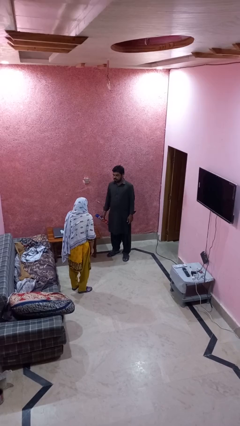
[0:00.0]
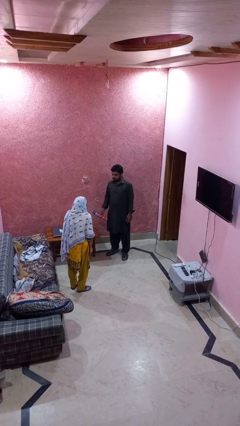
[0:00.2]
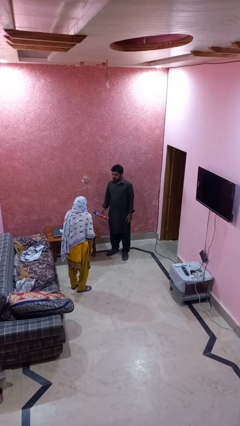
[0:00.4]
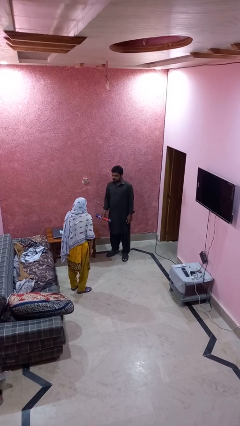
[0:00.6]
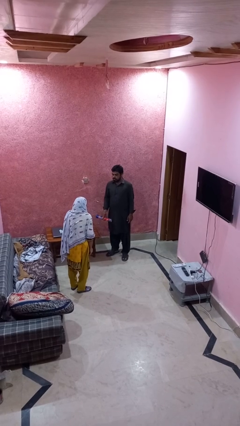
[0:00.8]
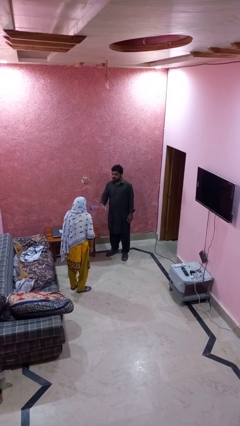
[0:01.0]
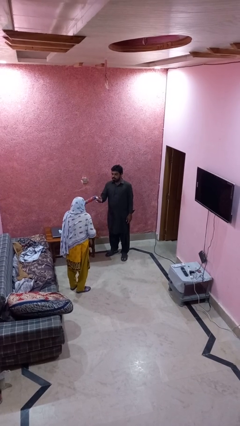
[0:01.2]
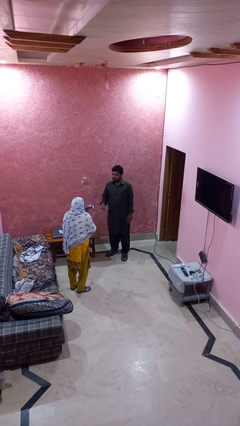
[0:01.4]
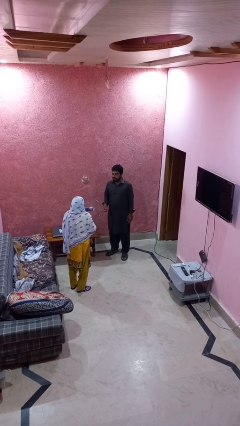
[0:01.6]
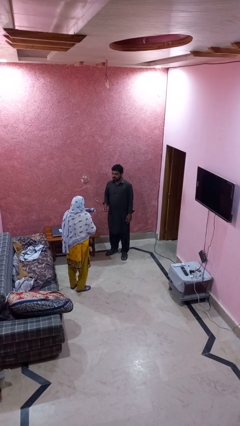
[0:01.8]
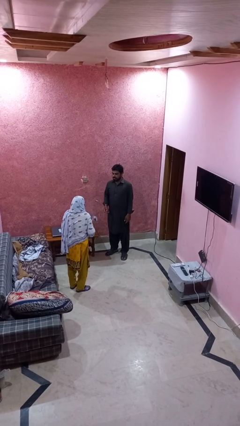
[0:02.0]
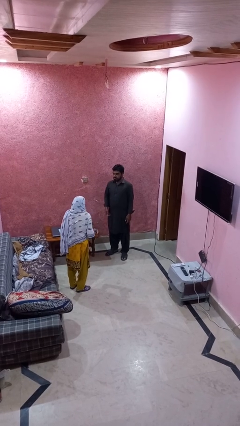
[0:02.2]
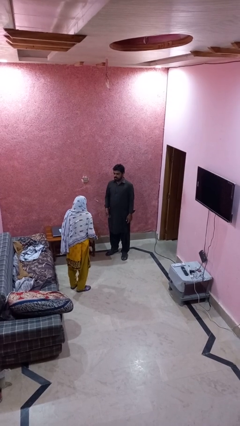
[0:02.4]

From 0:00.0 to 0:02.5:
person throws object to person

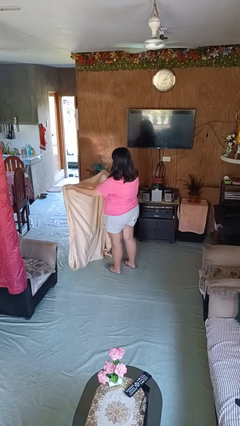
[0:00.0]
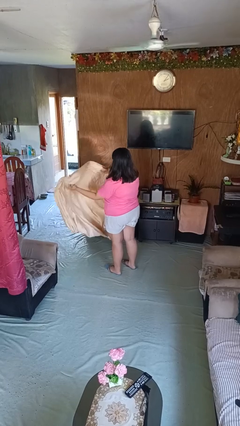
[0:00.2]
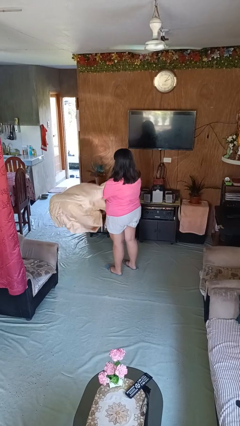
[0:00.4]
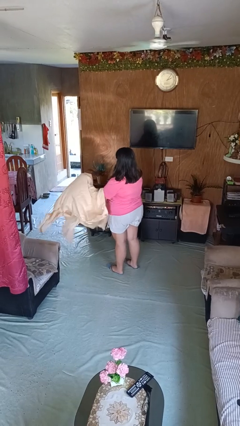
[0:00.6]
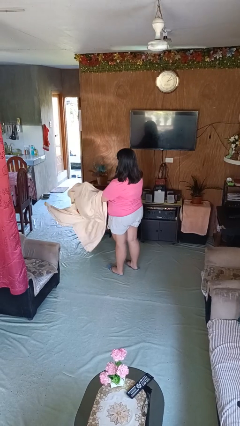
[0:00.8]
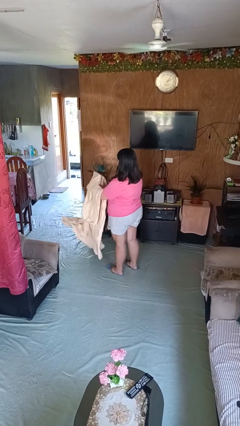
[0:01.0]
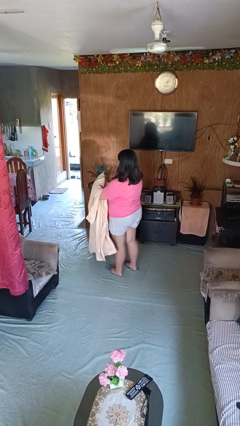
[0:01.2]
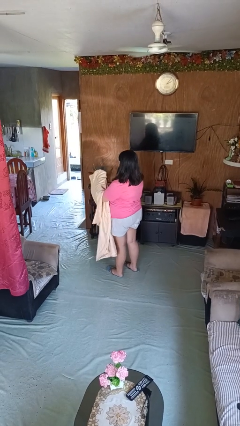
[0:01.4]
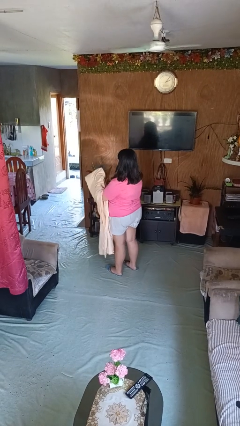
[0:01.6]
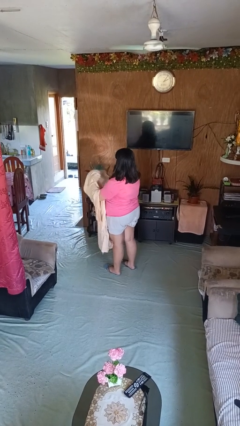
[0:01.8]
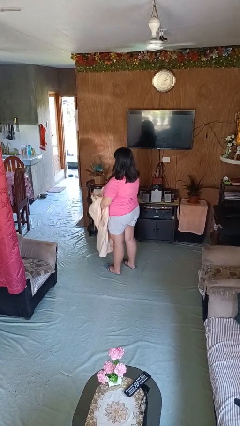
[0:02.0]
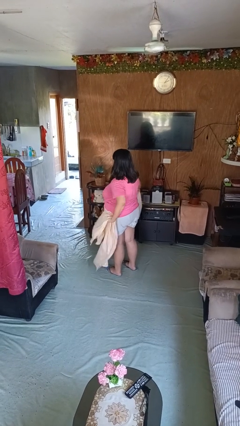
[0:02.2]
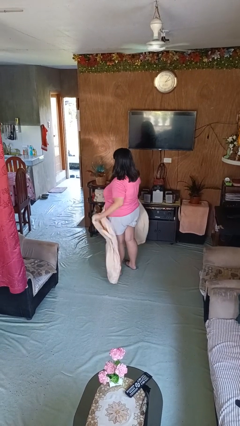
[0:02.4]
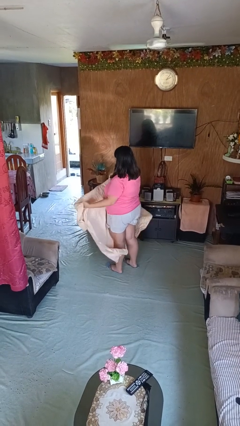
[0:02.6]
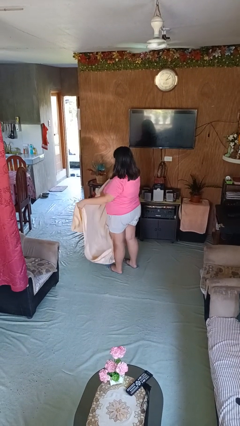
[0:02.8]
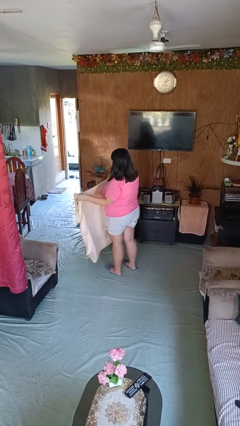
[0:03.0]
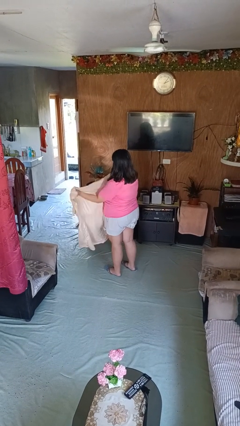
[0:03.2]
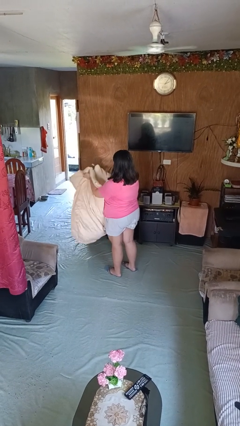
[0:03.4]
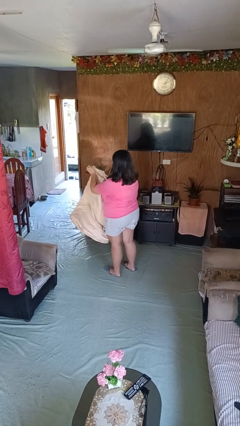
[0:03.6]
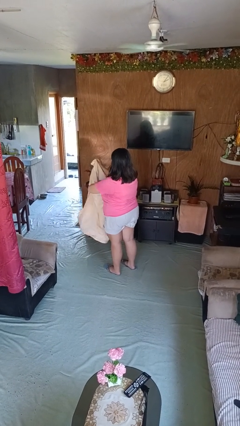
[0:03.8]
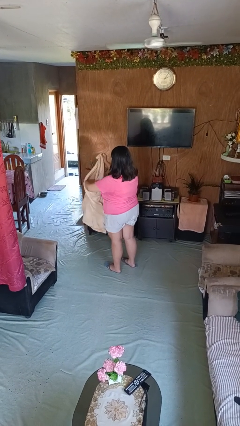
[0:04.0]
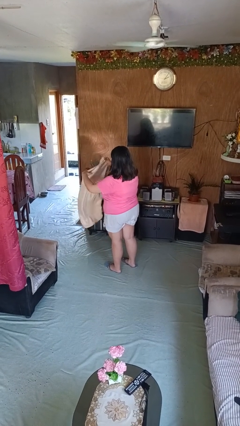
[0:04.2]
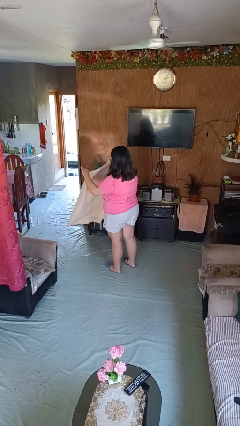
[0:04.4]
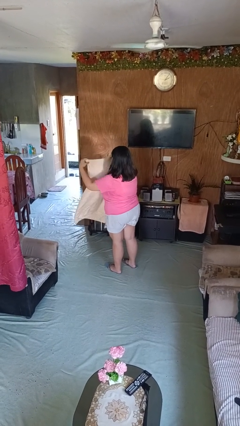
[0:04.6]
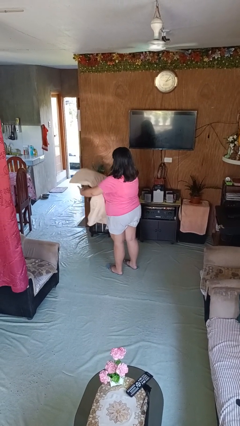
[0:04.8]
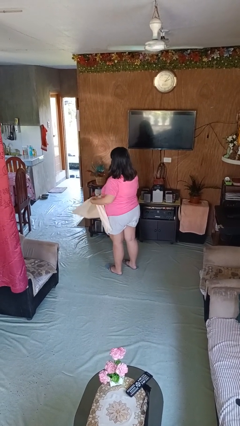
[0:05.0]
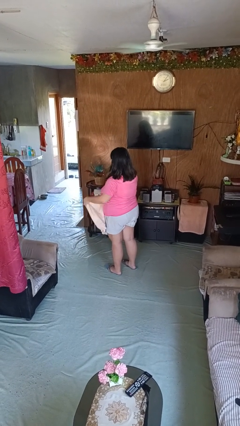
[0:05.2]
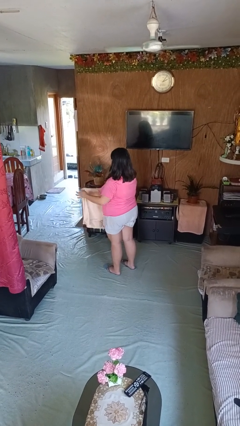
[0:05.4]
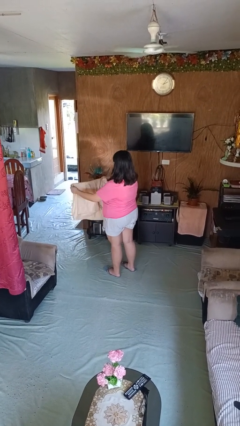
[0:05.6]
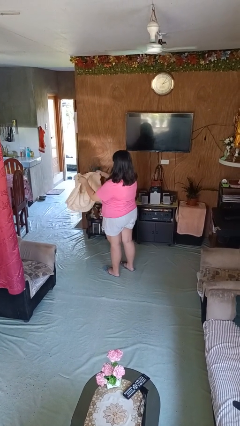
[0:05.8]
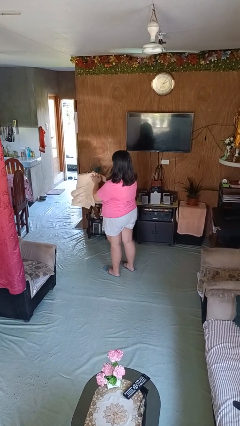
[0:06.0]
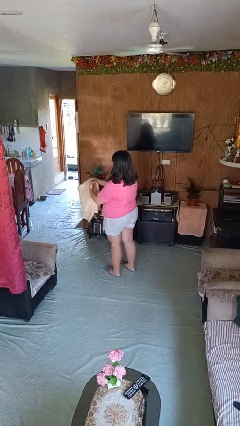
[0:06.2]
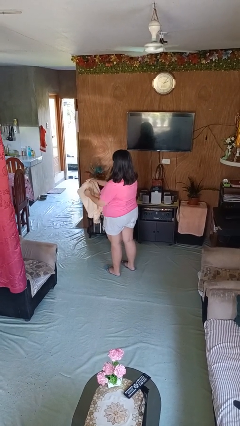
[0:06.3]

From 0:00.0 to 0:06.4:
person folds blanket

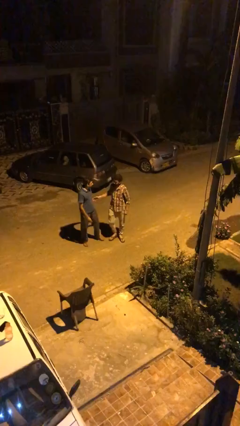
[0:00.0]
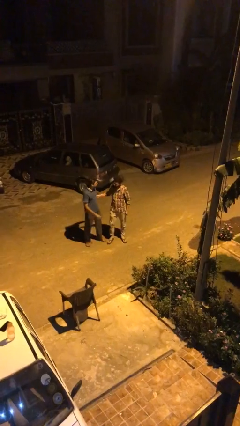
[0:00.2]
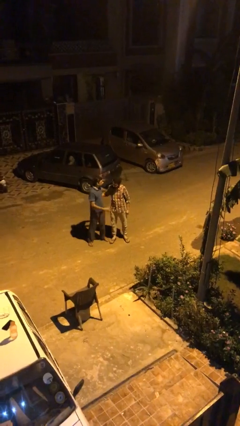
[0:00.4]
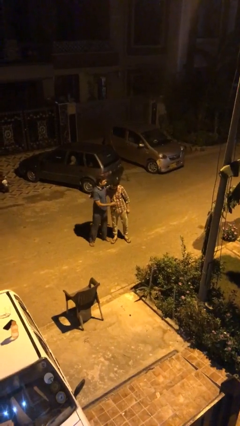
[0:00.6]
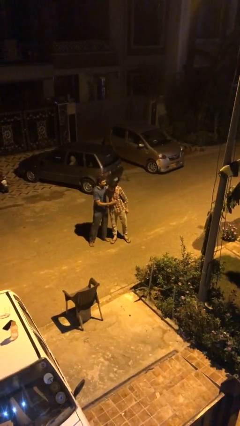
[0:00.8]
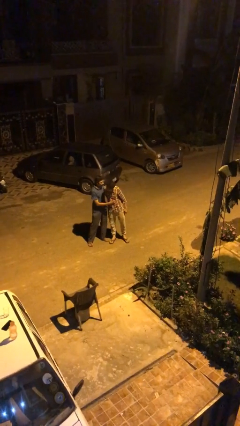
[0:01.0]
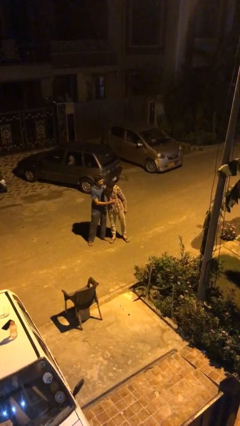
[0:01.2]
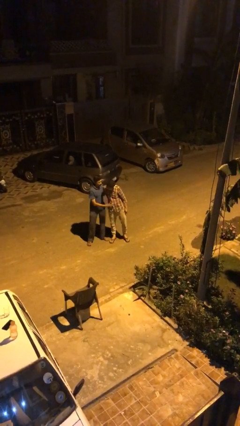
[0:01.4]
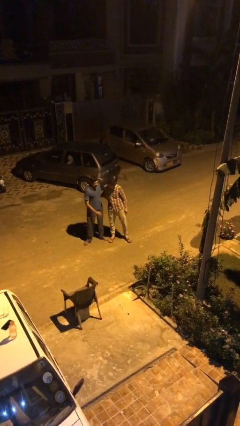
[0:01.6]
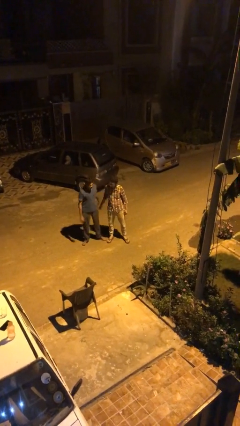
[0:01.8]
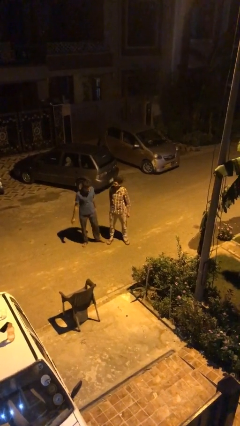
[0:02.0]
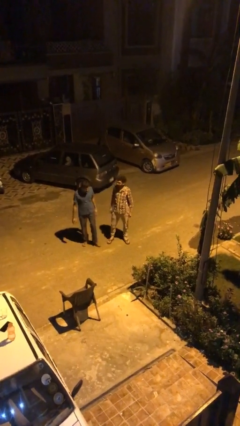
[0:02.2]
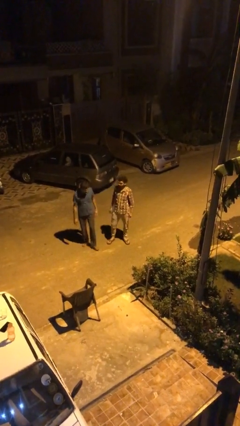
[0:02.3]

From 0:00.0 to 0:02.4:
person embraces person

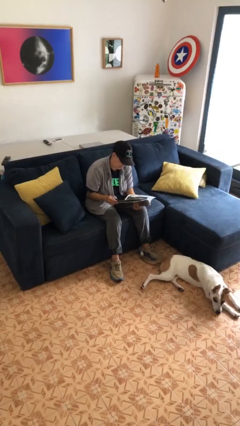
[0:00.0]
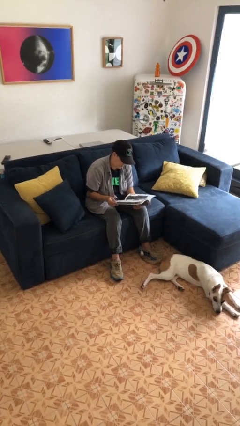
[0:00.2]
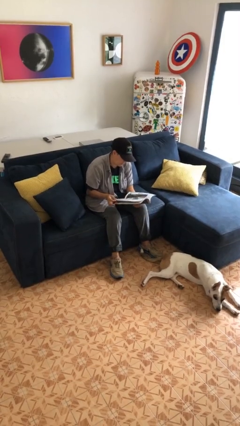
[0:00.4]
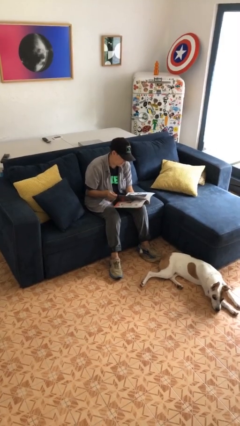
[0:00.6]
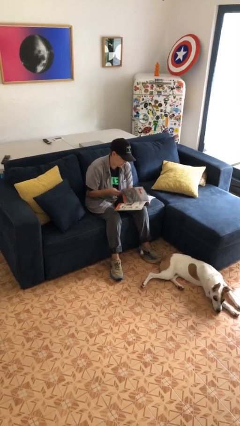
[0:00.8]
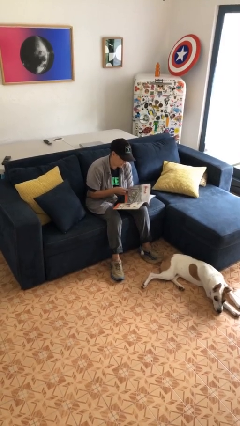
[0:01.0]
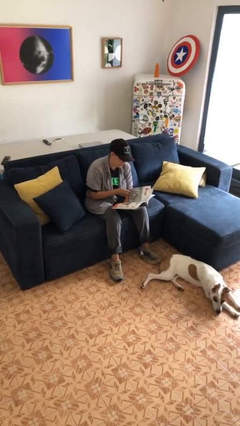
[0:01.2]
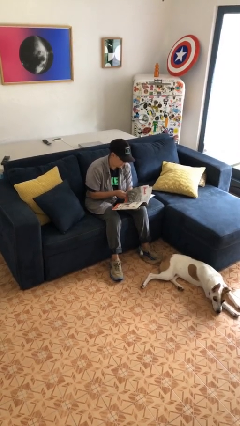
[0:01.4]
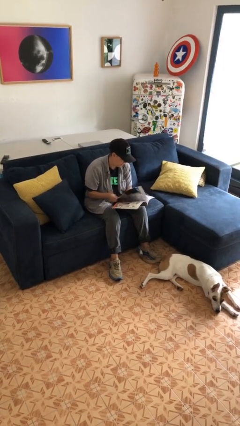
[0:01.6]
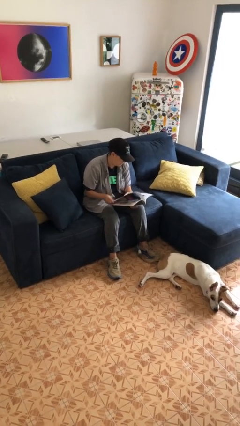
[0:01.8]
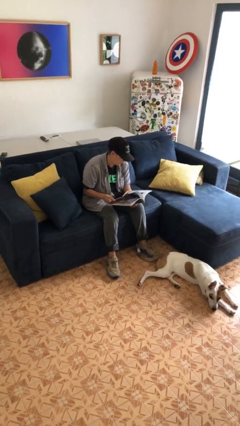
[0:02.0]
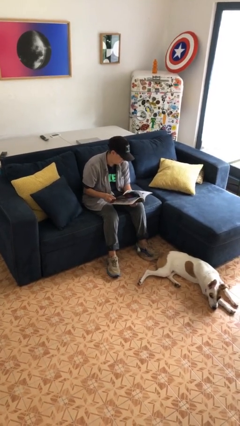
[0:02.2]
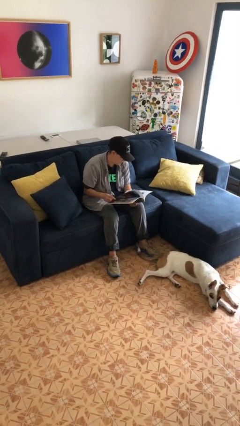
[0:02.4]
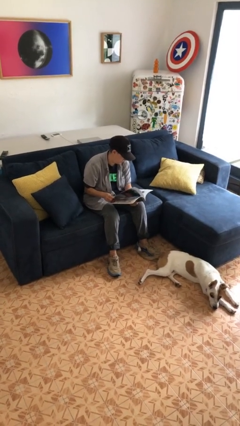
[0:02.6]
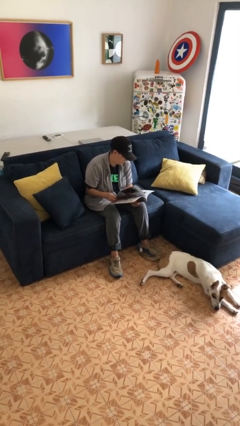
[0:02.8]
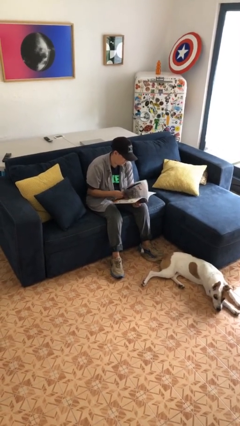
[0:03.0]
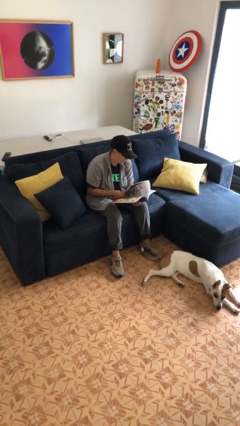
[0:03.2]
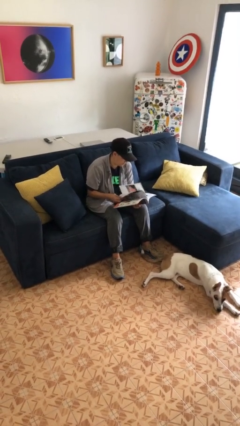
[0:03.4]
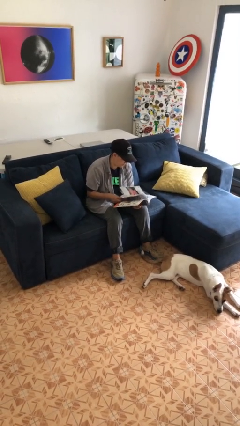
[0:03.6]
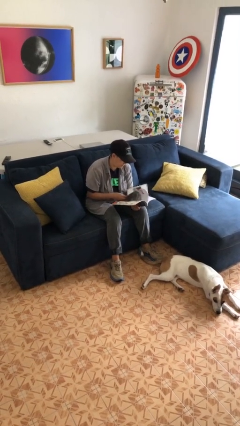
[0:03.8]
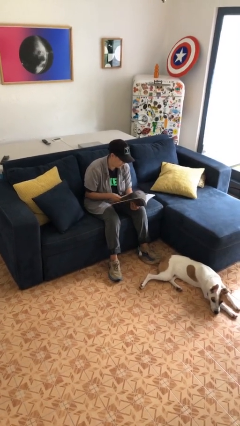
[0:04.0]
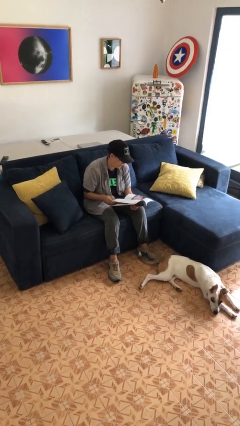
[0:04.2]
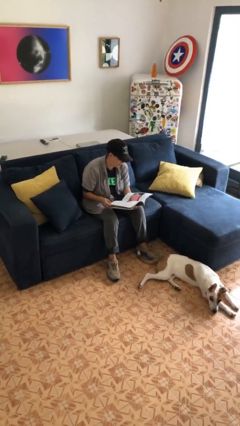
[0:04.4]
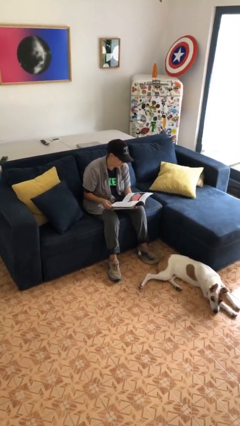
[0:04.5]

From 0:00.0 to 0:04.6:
person reads magazine

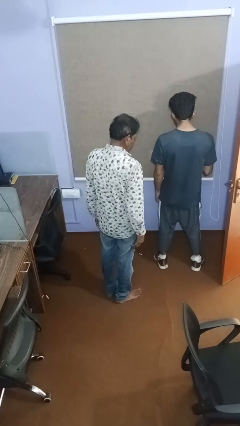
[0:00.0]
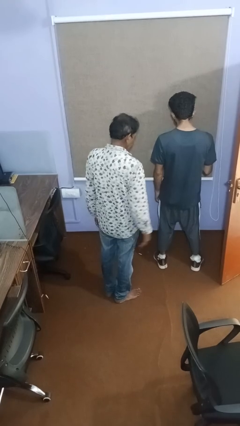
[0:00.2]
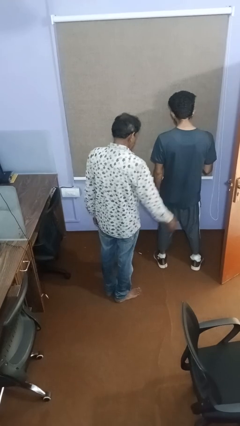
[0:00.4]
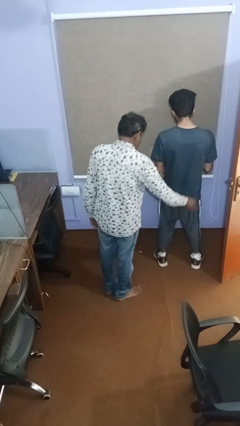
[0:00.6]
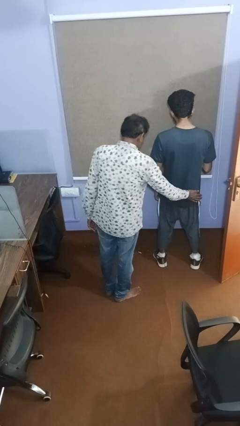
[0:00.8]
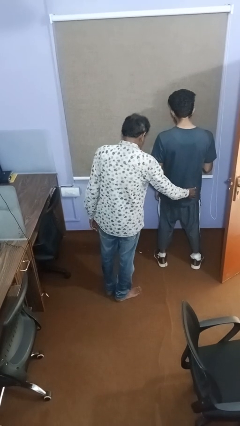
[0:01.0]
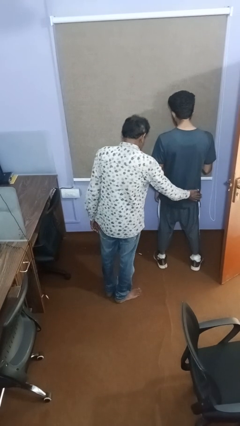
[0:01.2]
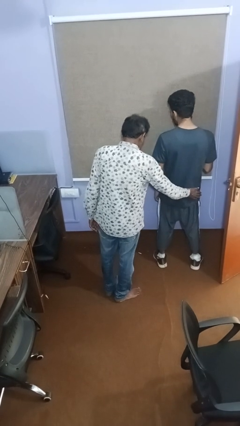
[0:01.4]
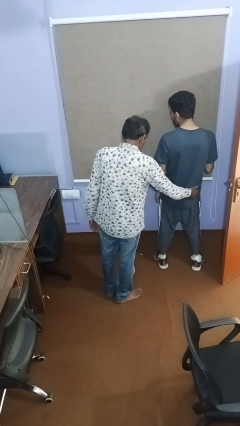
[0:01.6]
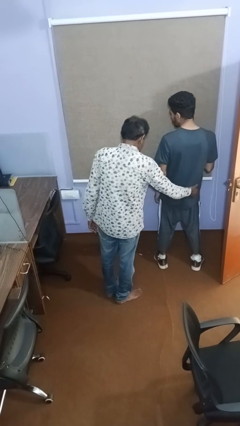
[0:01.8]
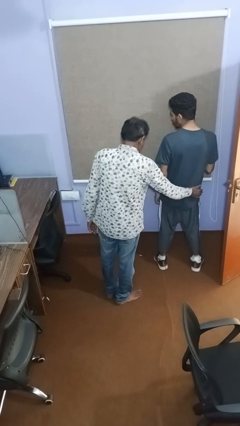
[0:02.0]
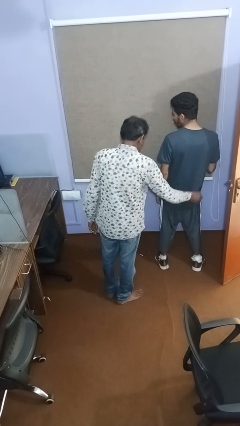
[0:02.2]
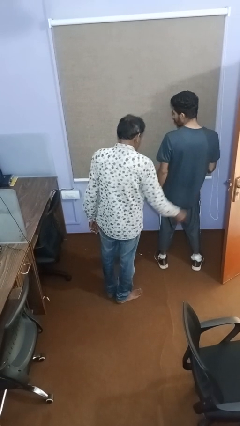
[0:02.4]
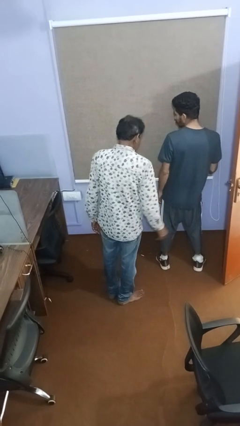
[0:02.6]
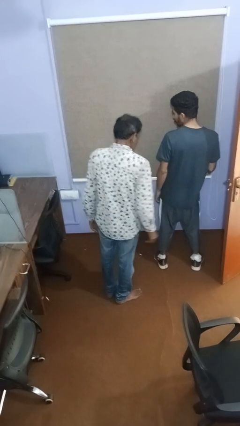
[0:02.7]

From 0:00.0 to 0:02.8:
person touches back of person
